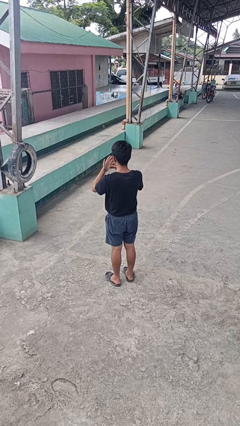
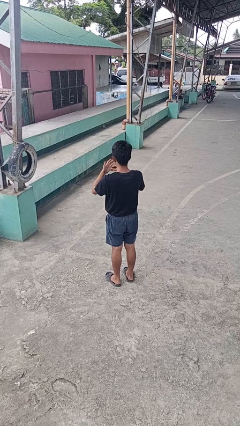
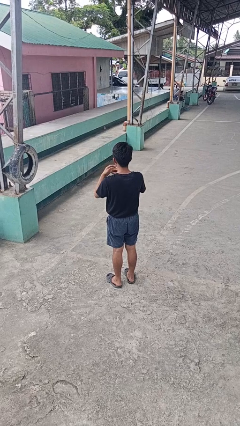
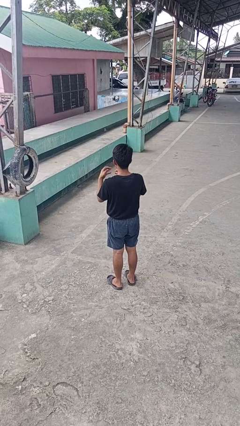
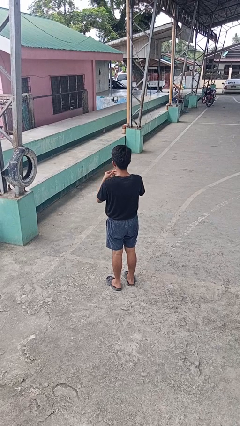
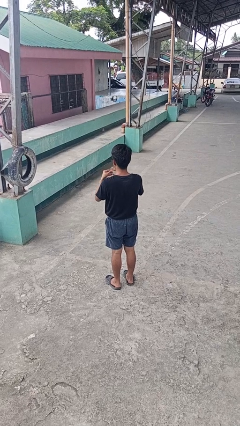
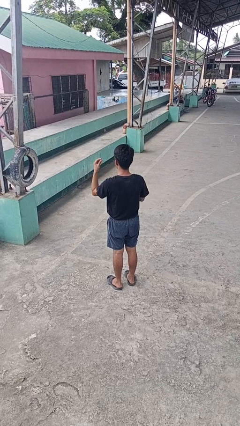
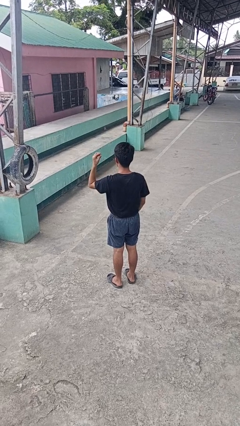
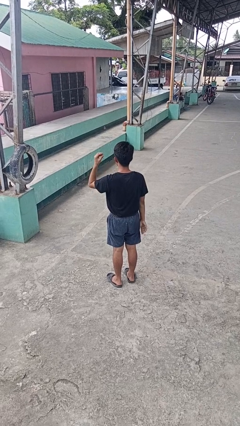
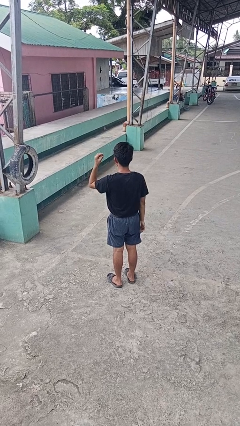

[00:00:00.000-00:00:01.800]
person takes off ring

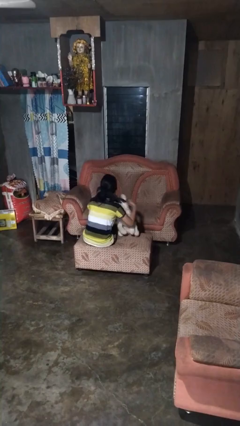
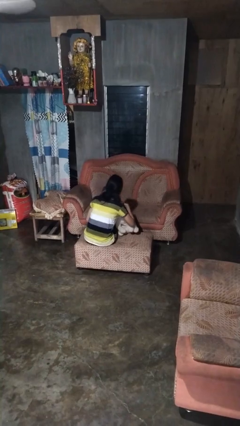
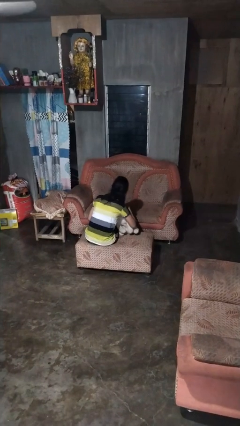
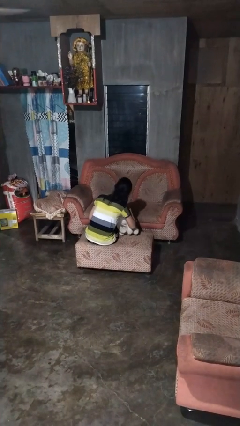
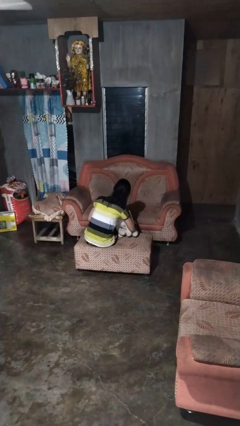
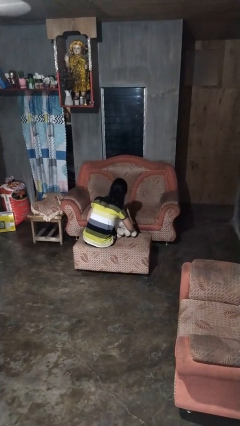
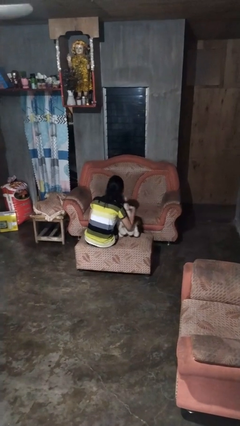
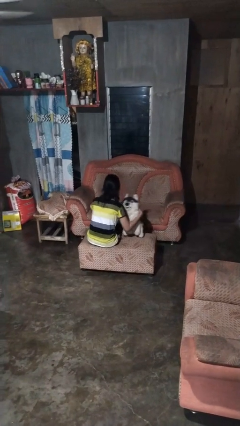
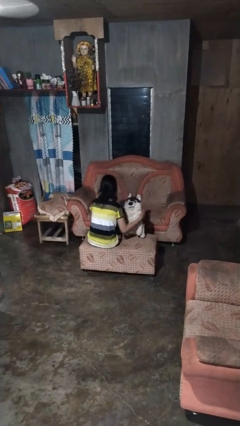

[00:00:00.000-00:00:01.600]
person hugs stuffed animal

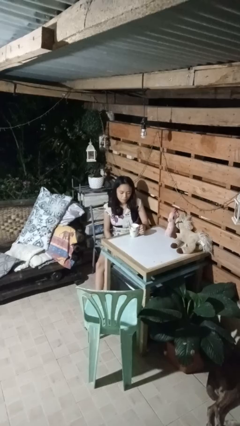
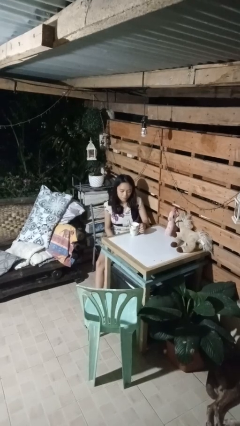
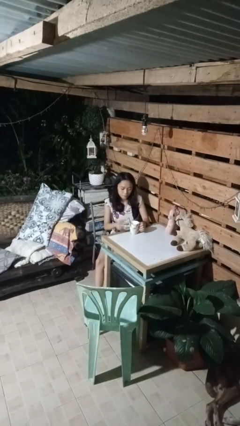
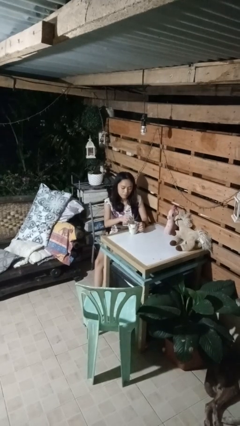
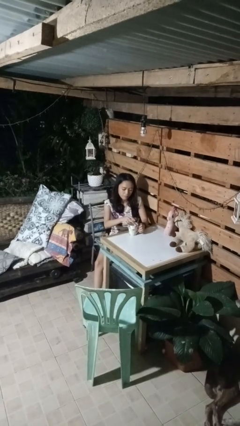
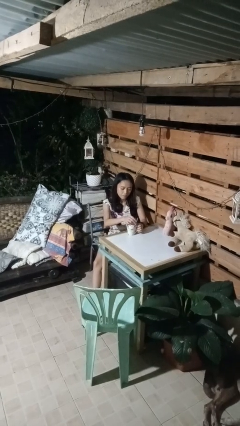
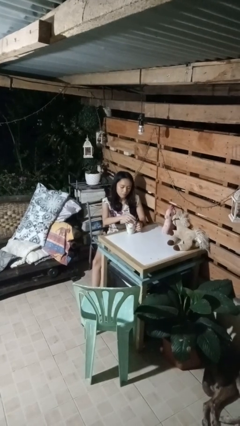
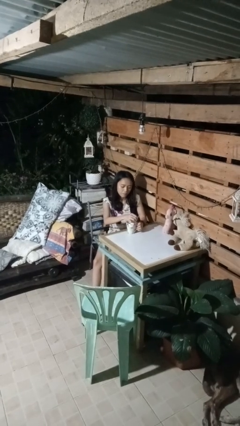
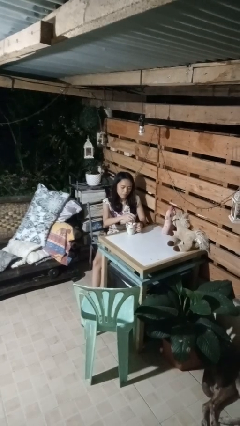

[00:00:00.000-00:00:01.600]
person stirs mug

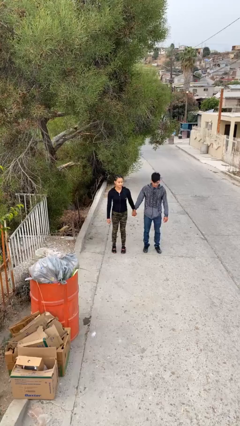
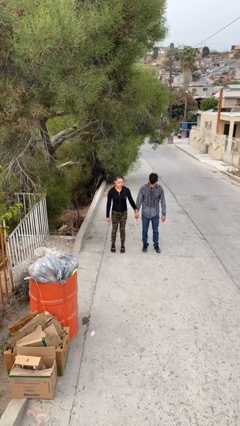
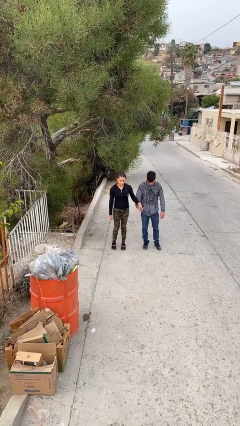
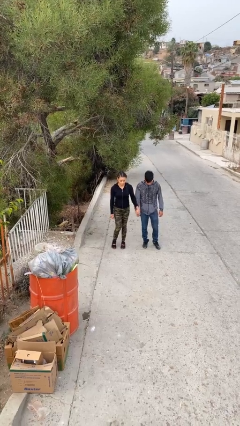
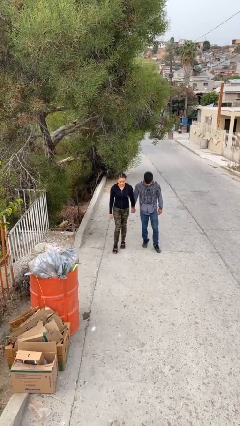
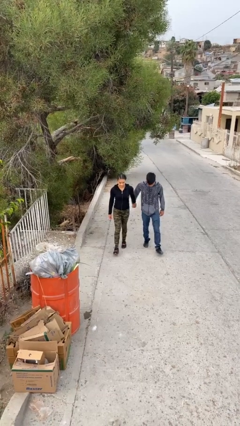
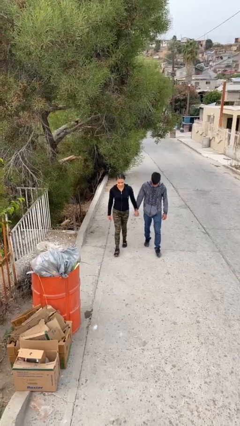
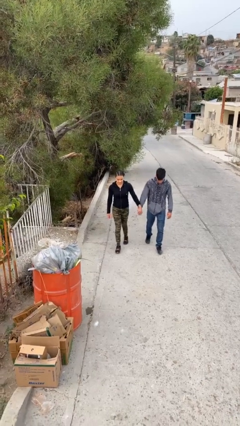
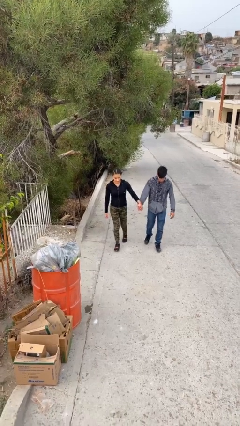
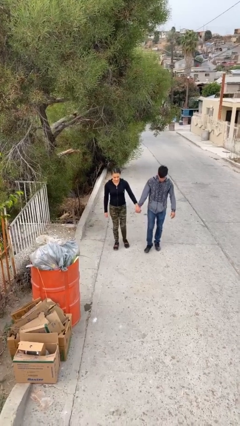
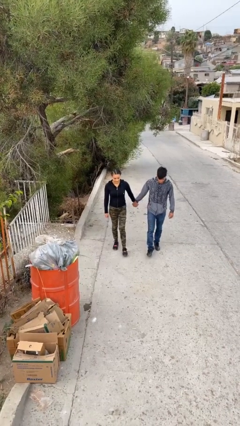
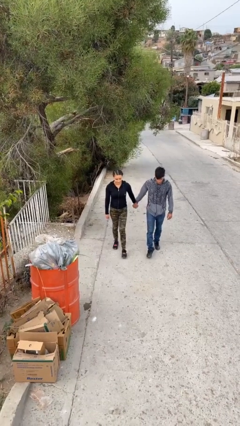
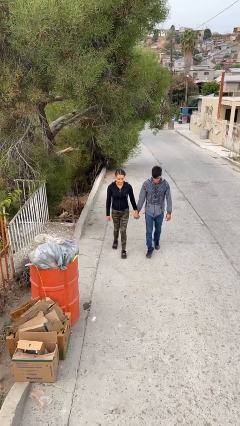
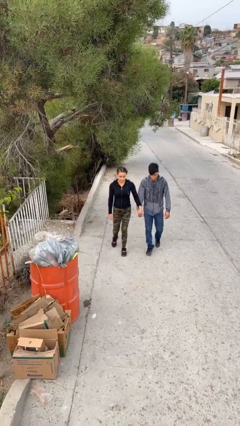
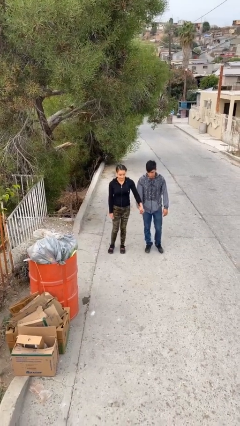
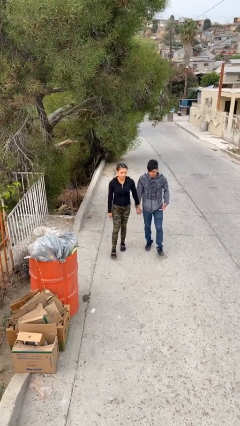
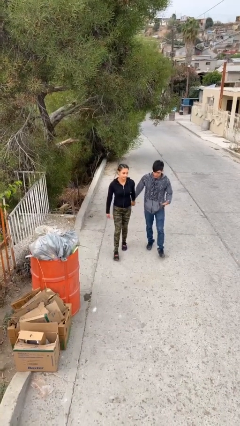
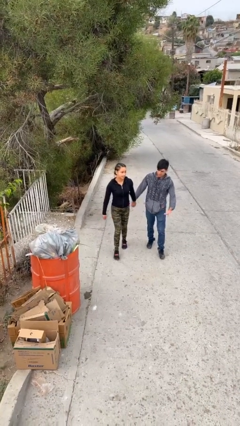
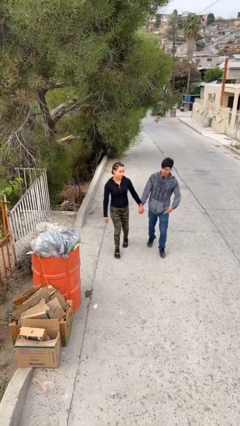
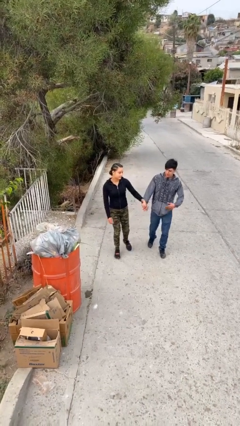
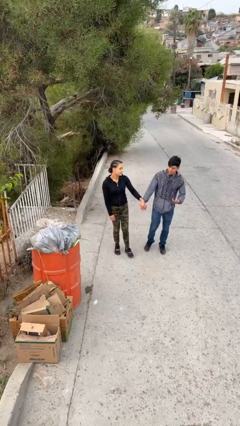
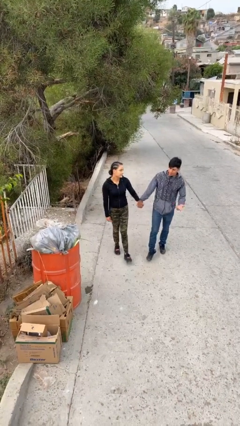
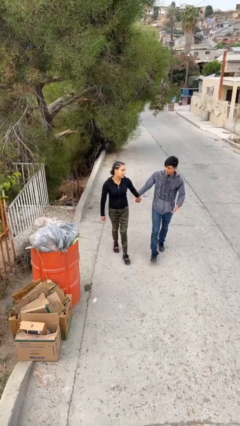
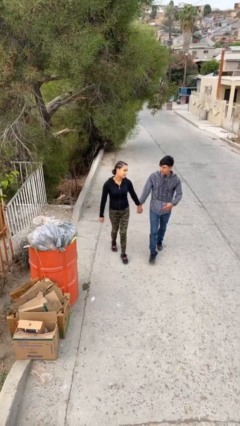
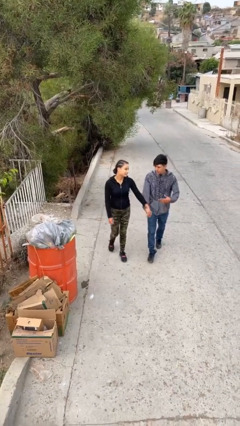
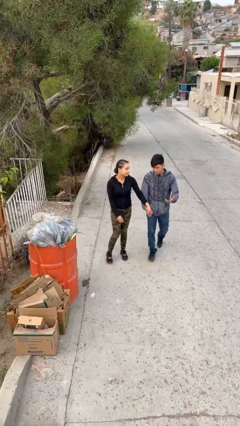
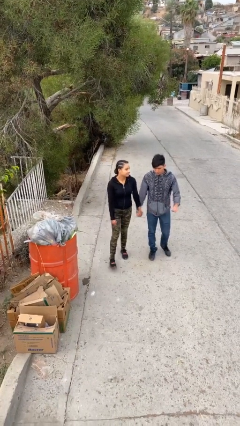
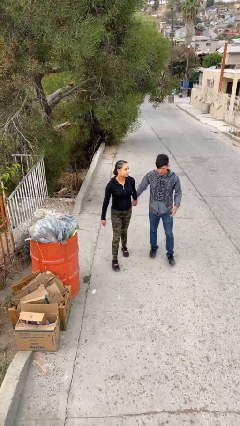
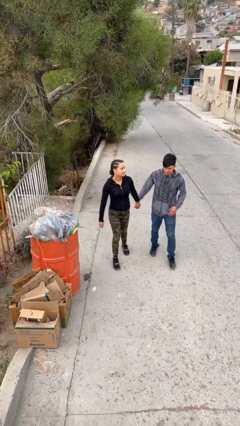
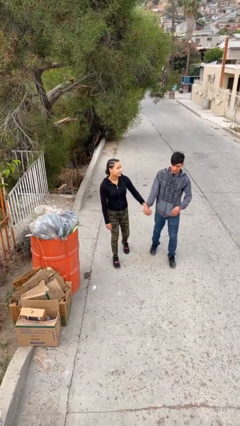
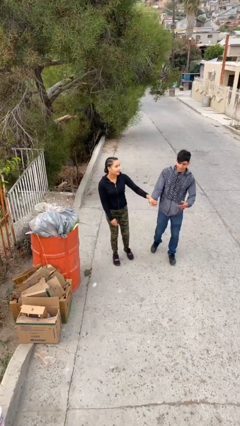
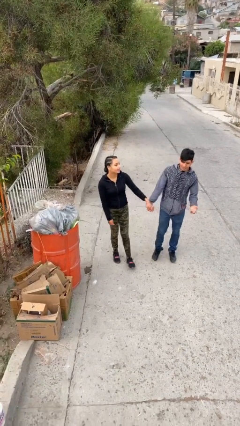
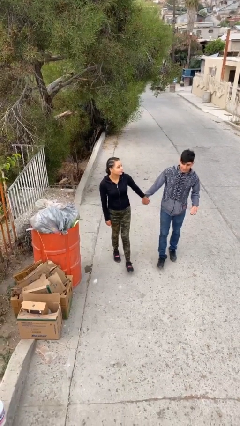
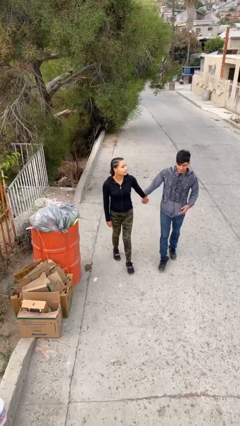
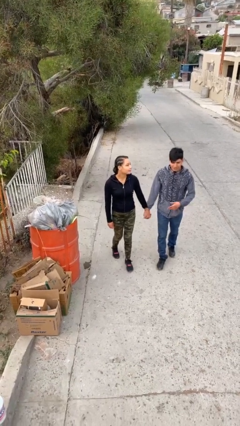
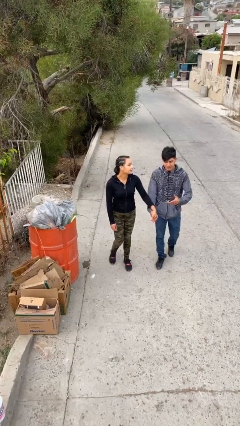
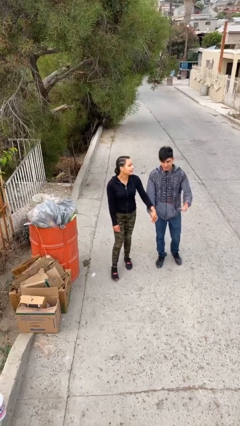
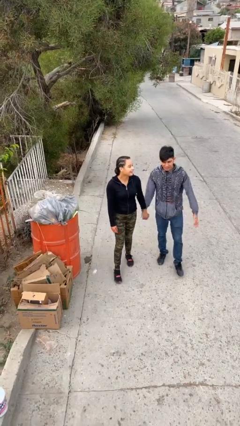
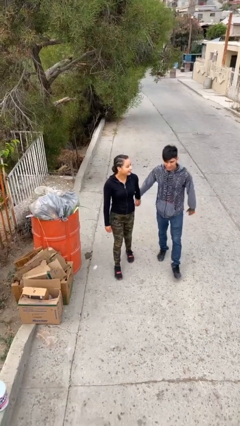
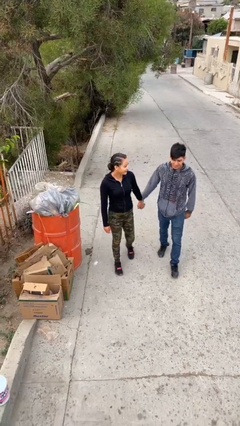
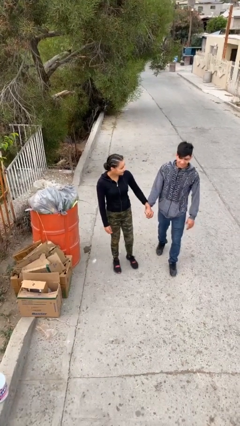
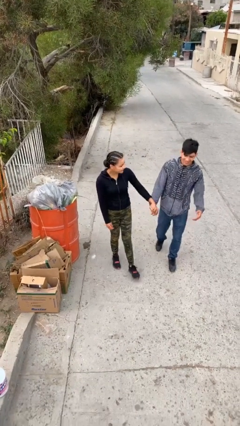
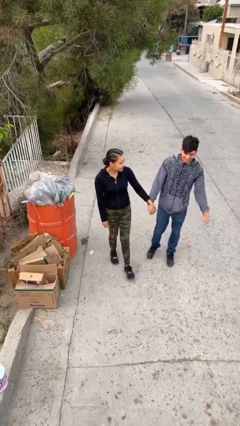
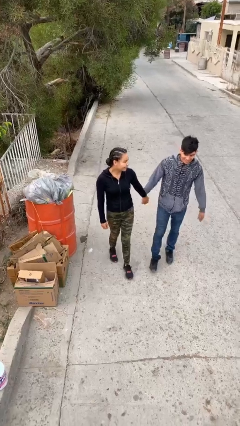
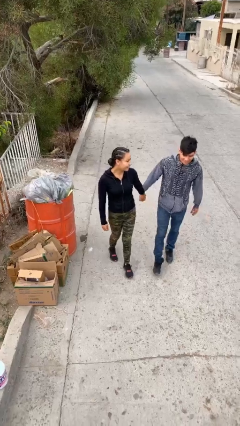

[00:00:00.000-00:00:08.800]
person holds hand

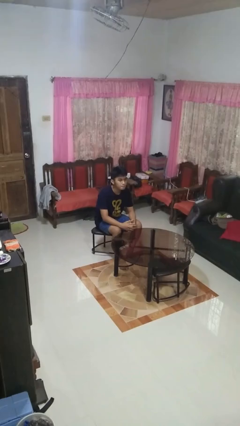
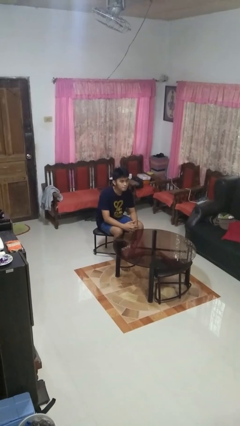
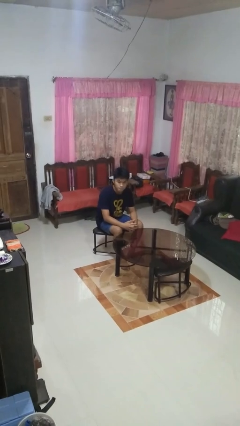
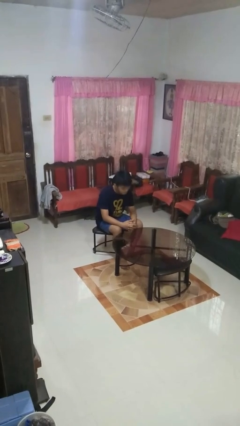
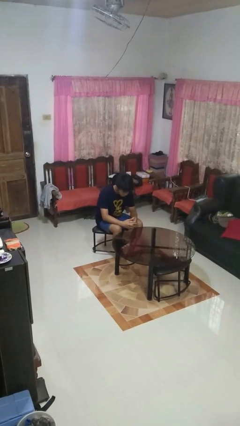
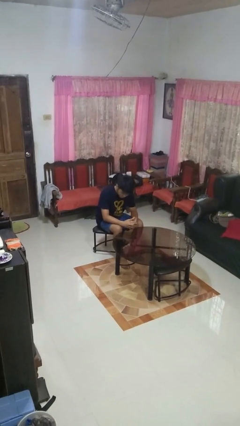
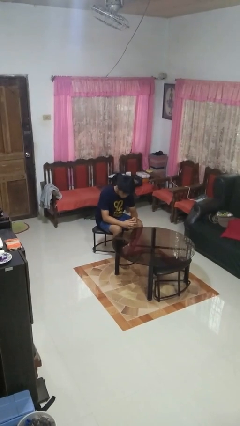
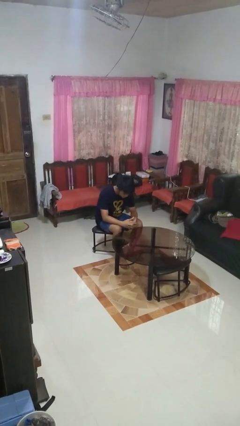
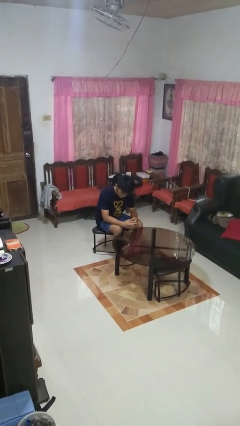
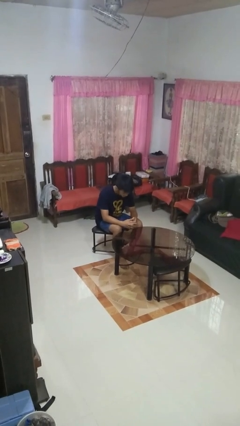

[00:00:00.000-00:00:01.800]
person shakes head

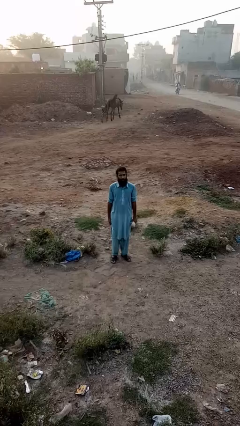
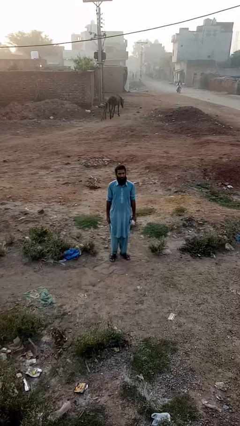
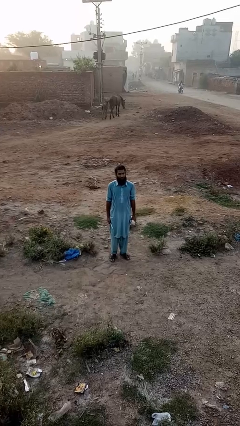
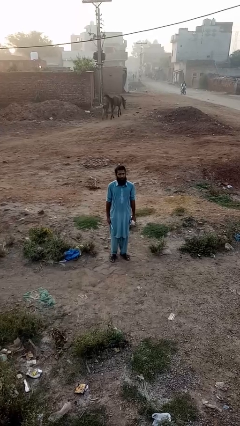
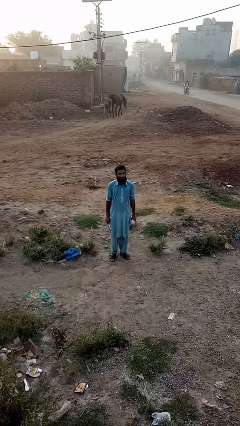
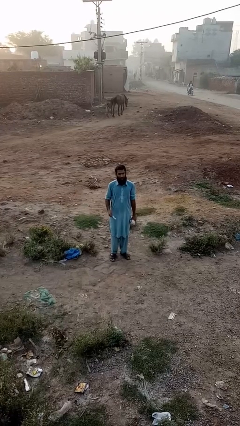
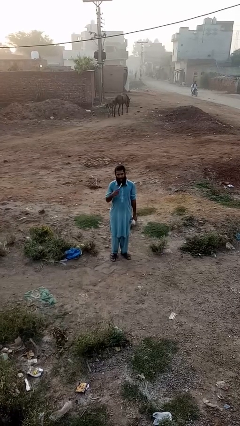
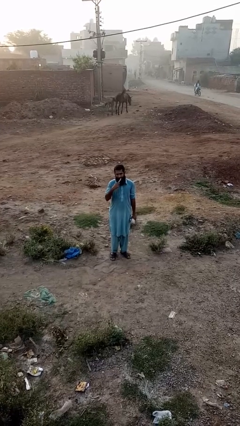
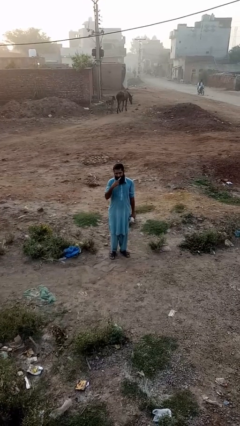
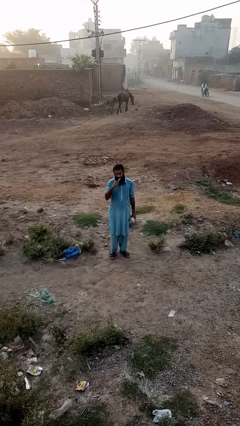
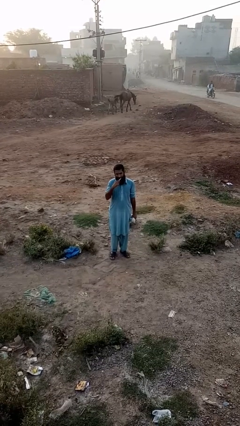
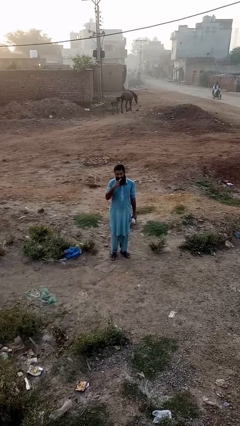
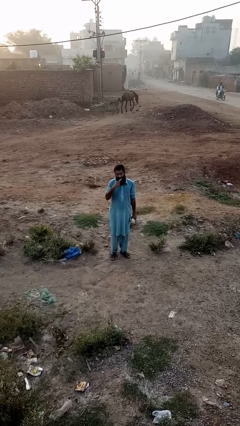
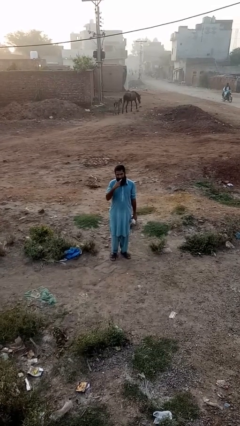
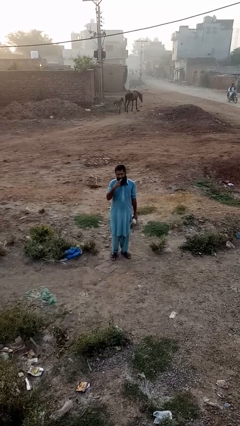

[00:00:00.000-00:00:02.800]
person brushes teeth
